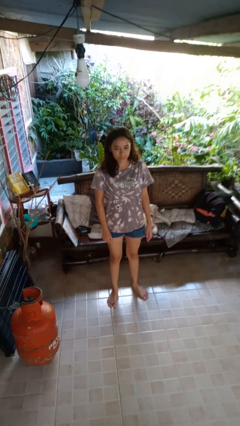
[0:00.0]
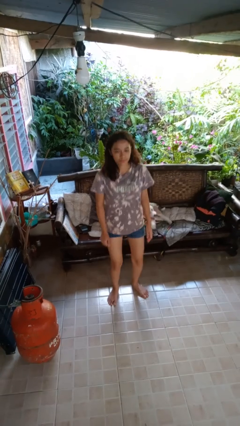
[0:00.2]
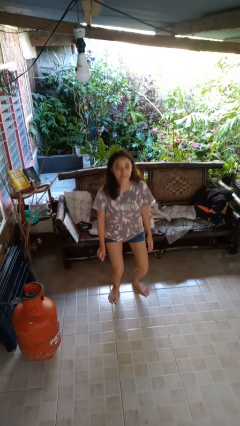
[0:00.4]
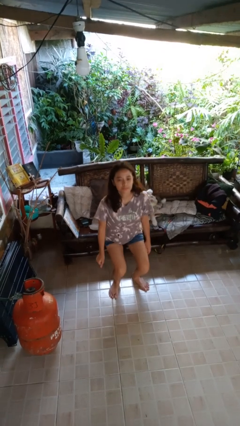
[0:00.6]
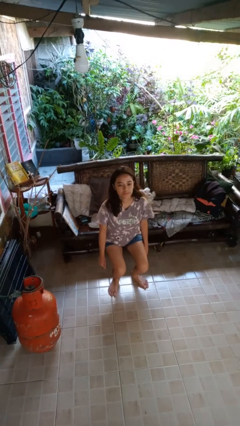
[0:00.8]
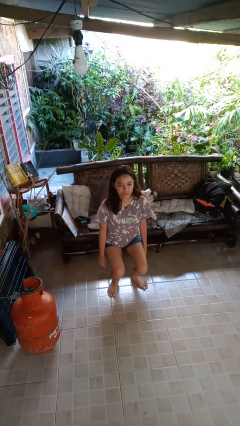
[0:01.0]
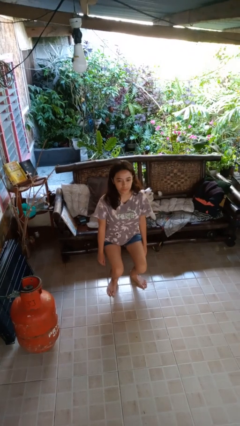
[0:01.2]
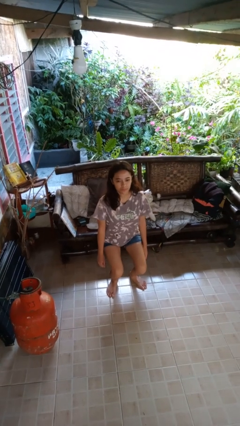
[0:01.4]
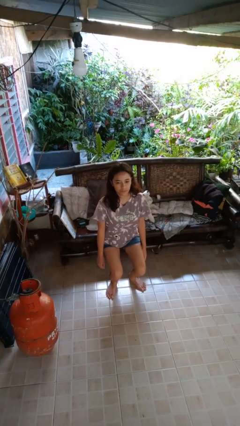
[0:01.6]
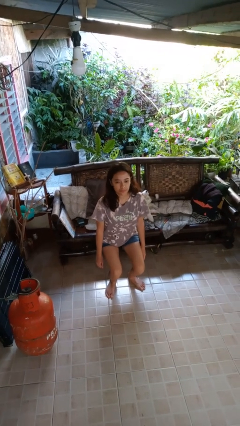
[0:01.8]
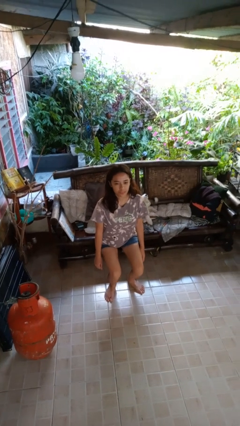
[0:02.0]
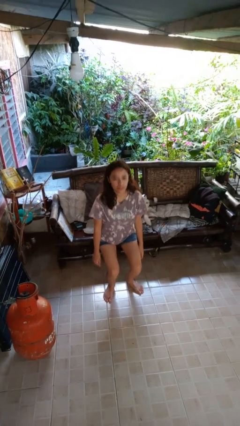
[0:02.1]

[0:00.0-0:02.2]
person squats

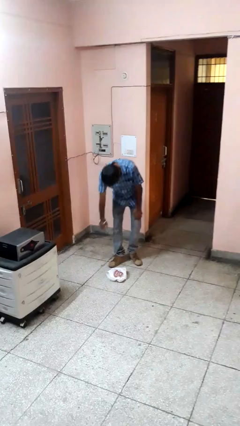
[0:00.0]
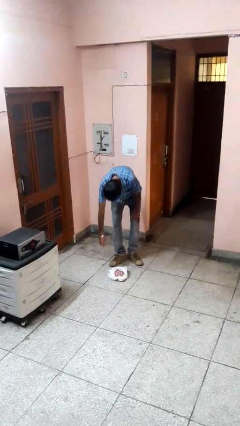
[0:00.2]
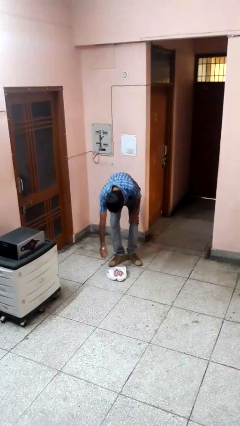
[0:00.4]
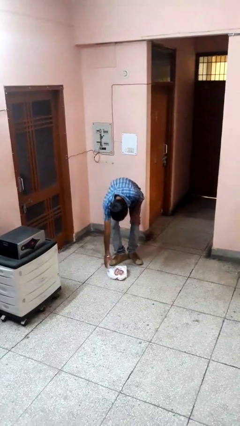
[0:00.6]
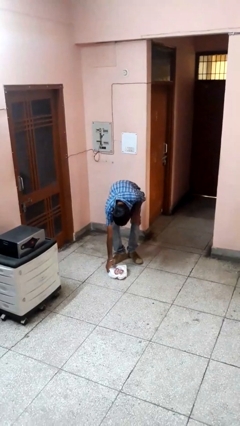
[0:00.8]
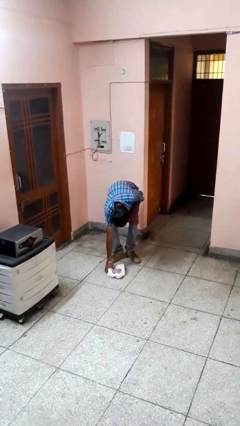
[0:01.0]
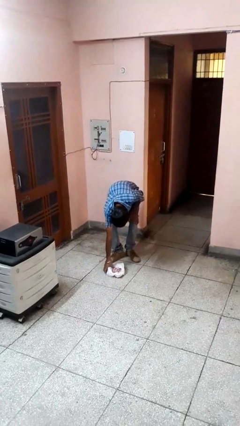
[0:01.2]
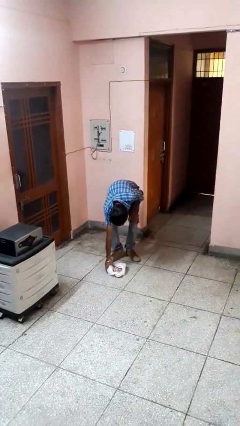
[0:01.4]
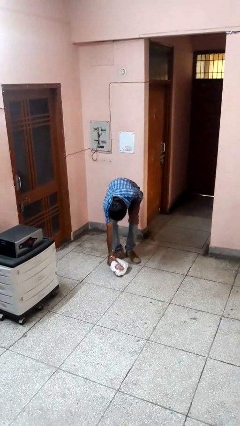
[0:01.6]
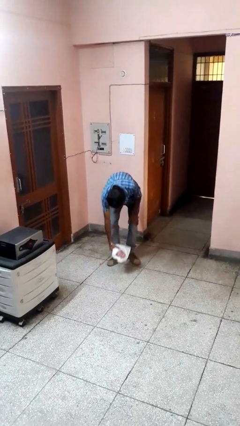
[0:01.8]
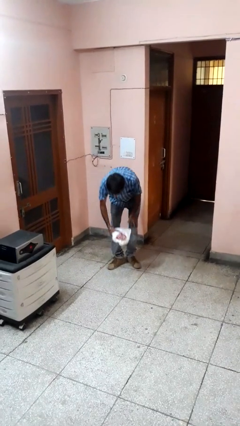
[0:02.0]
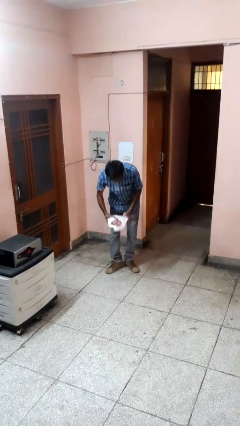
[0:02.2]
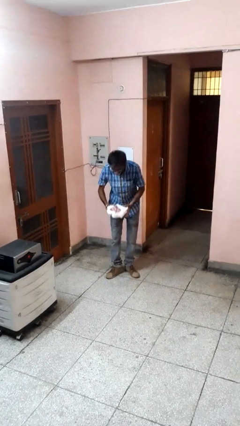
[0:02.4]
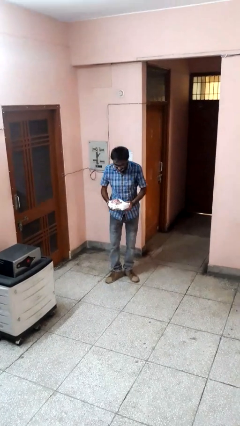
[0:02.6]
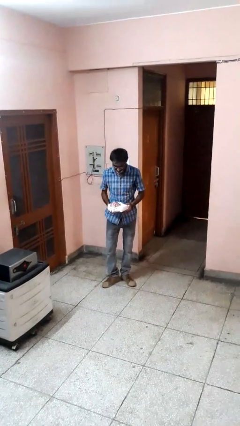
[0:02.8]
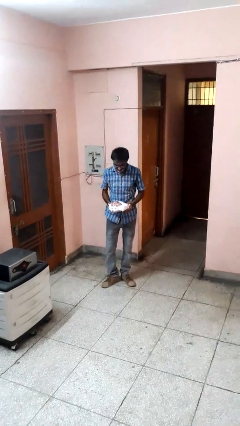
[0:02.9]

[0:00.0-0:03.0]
person picks up object from floor

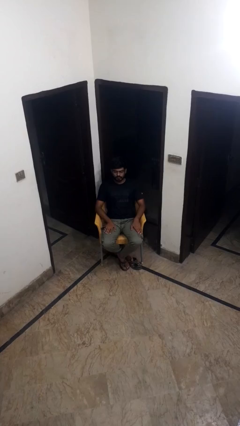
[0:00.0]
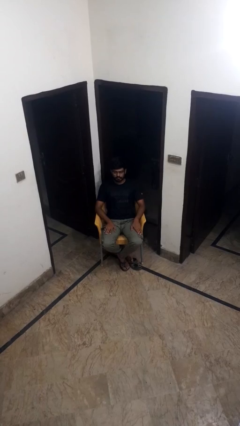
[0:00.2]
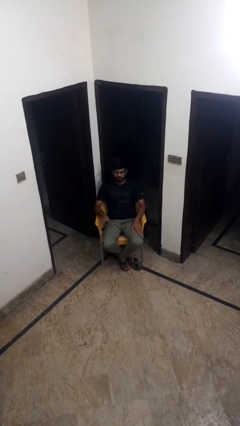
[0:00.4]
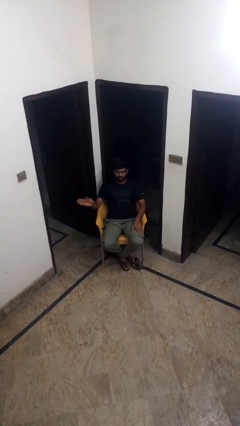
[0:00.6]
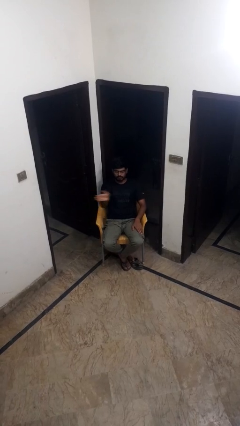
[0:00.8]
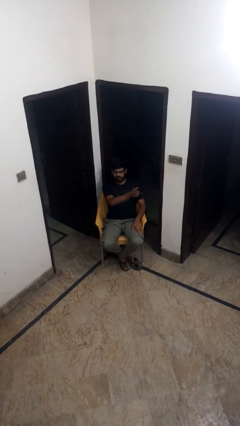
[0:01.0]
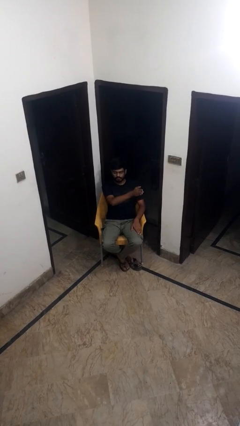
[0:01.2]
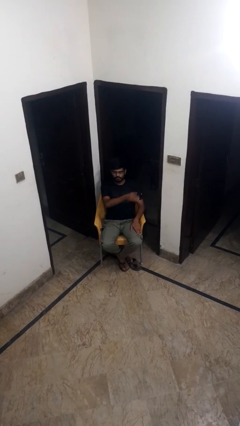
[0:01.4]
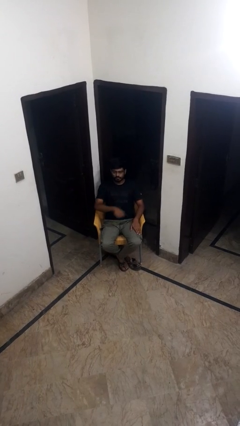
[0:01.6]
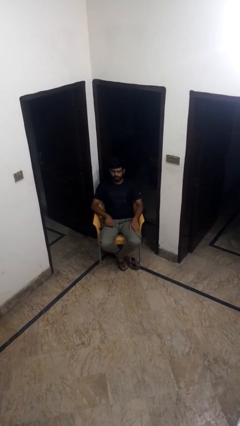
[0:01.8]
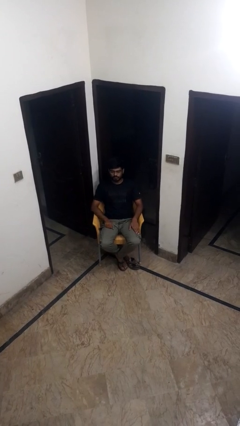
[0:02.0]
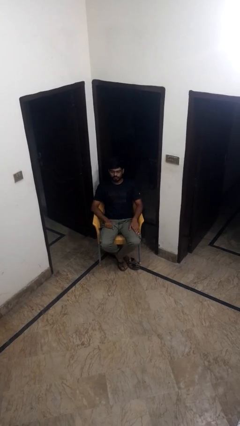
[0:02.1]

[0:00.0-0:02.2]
person gestures swipe left

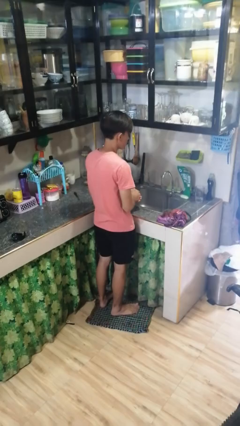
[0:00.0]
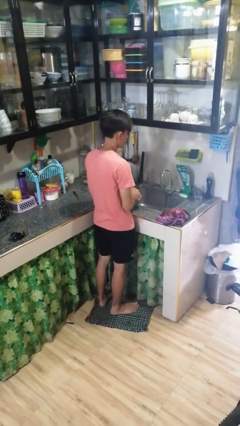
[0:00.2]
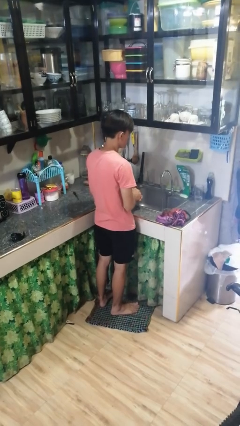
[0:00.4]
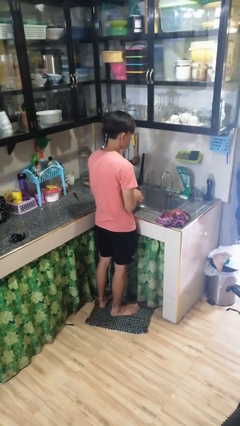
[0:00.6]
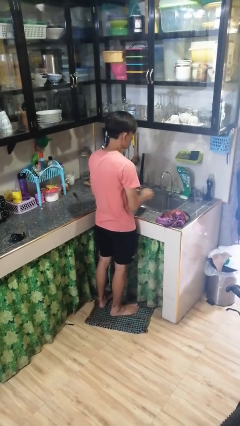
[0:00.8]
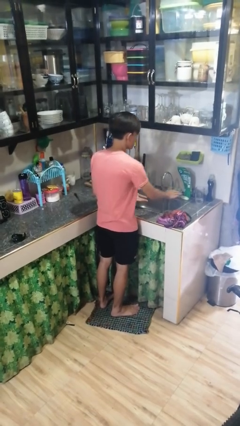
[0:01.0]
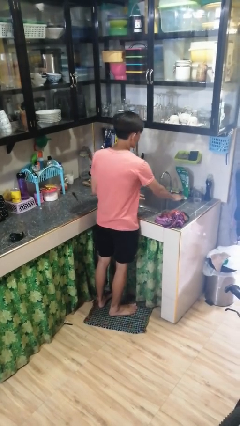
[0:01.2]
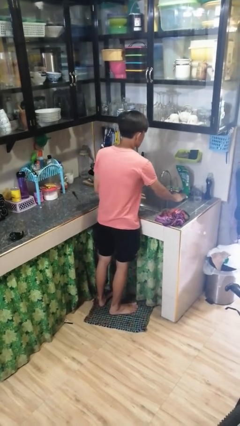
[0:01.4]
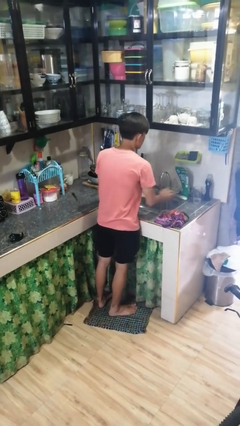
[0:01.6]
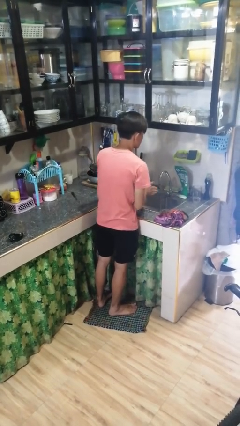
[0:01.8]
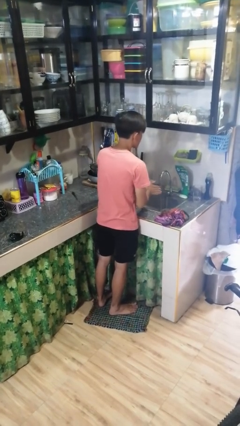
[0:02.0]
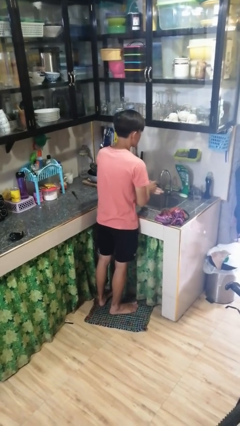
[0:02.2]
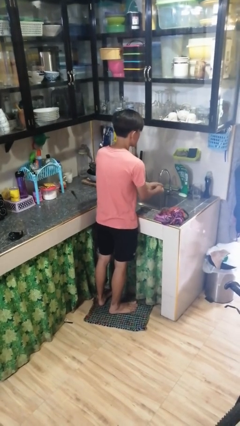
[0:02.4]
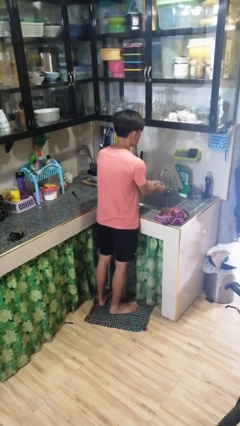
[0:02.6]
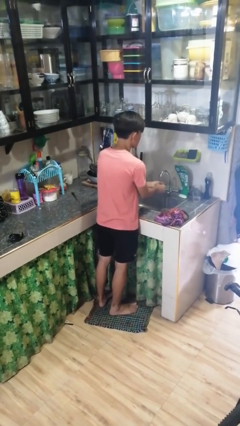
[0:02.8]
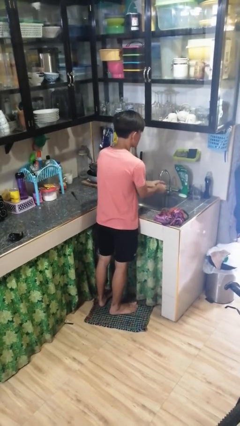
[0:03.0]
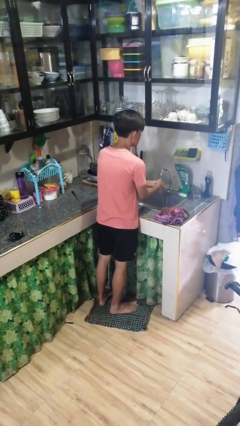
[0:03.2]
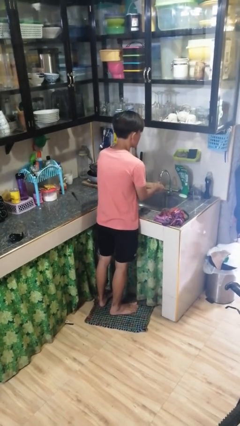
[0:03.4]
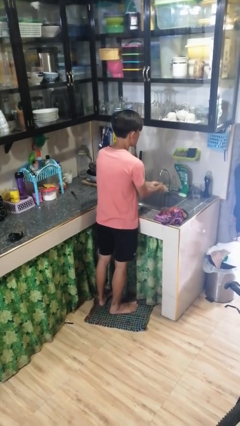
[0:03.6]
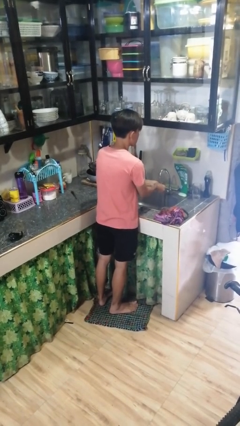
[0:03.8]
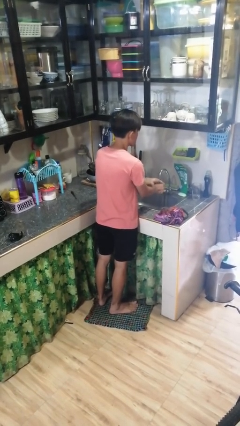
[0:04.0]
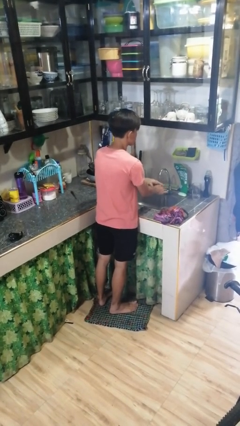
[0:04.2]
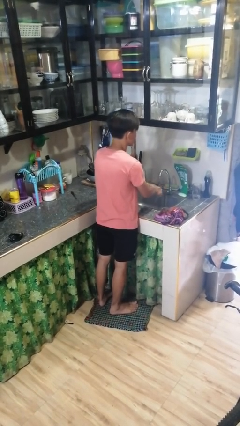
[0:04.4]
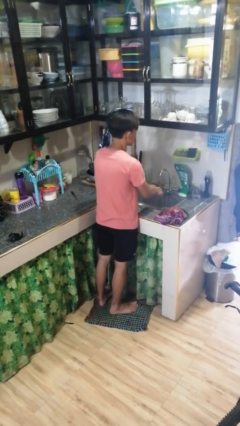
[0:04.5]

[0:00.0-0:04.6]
person washes hands

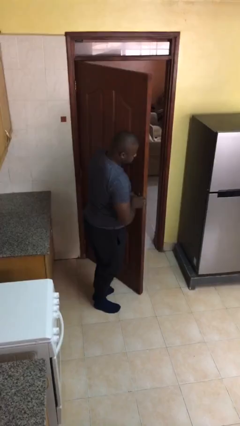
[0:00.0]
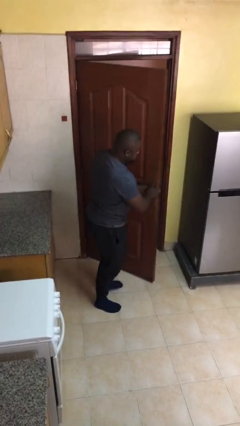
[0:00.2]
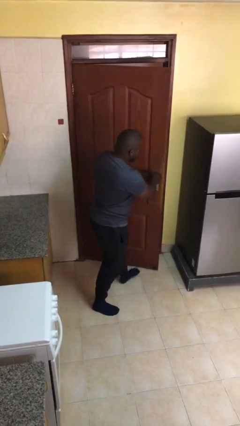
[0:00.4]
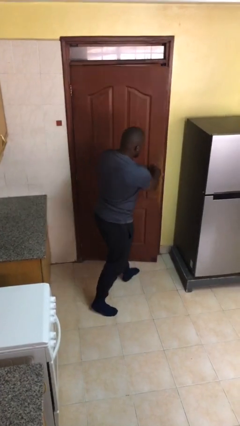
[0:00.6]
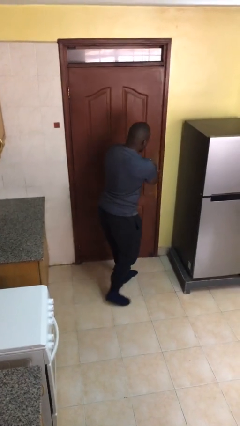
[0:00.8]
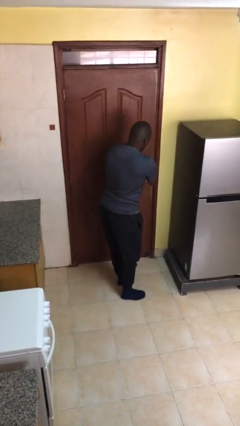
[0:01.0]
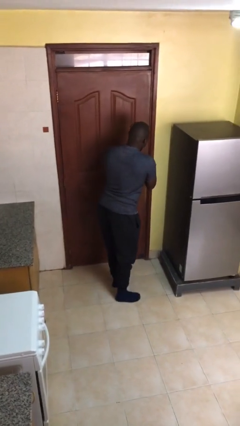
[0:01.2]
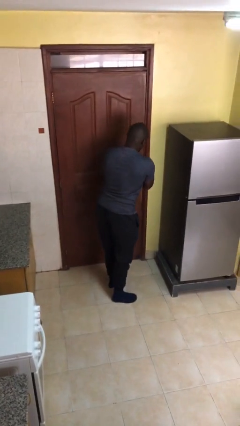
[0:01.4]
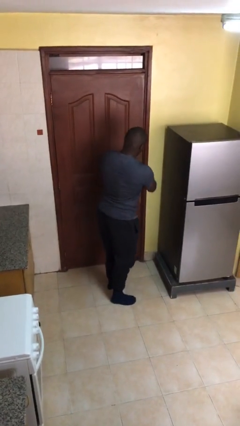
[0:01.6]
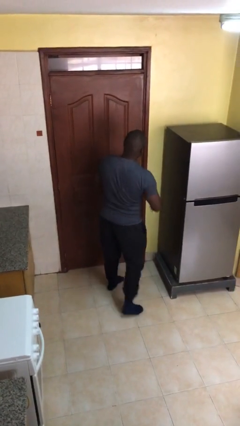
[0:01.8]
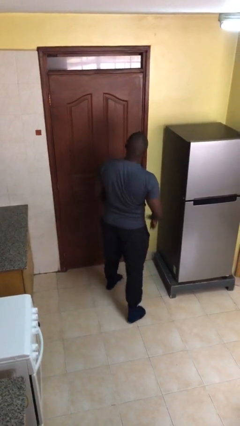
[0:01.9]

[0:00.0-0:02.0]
person closes facility door

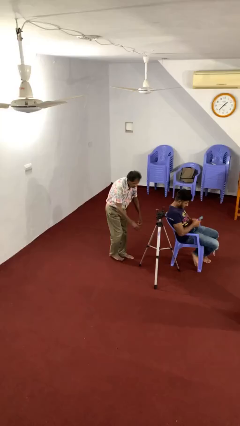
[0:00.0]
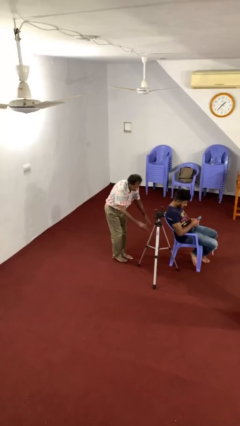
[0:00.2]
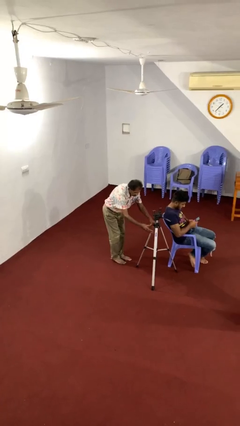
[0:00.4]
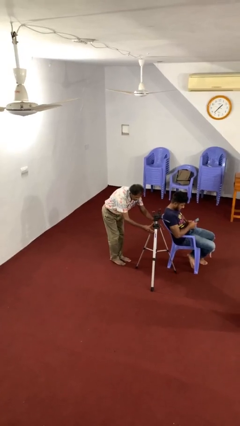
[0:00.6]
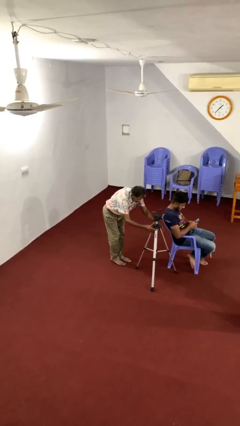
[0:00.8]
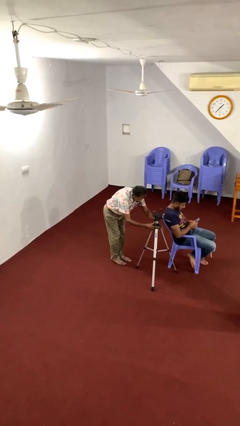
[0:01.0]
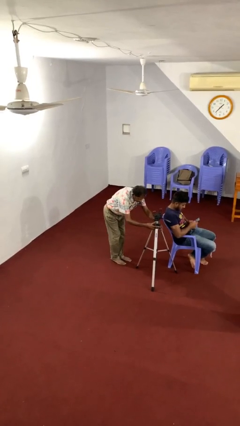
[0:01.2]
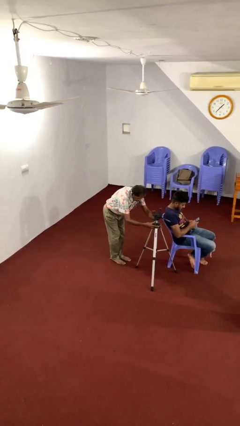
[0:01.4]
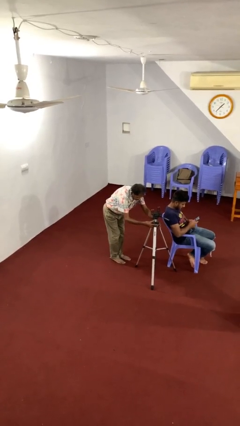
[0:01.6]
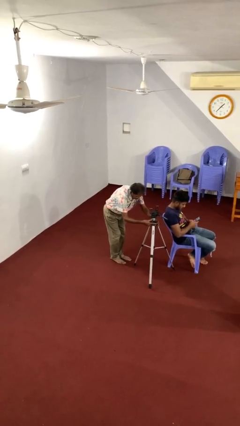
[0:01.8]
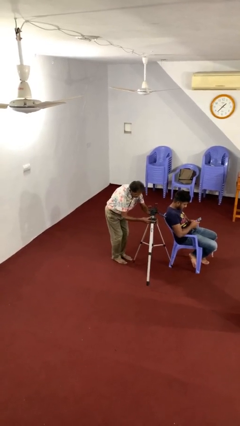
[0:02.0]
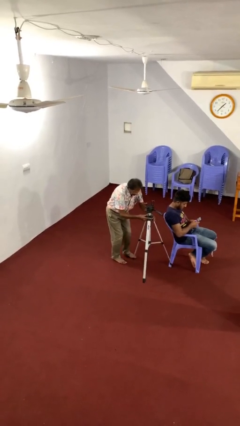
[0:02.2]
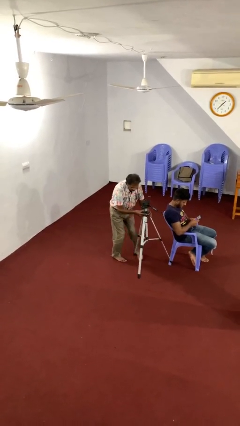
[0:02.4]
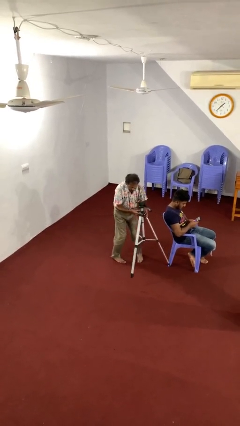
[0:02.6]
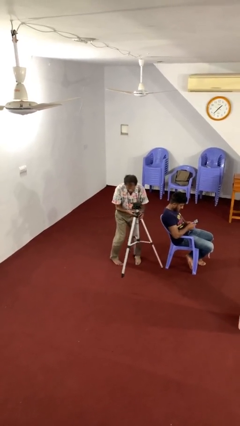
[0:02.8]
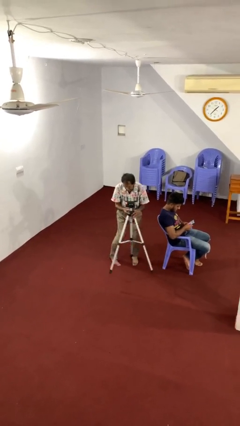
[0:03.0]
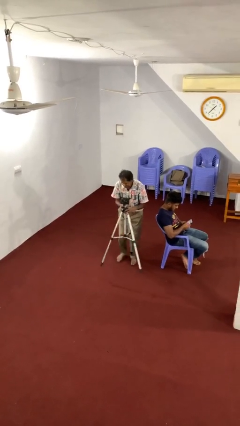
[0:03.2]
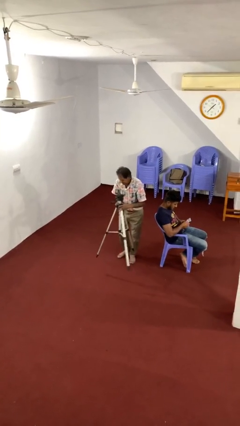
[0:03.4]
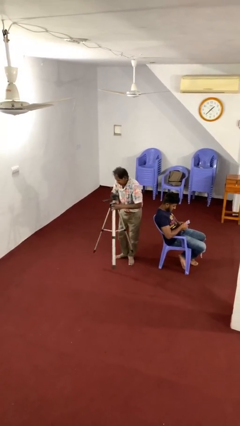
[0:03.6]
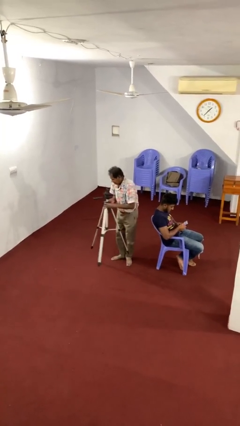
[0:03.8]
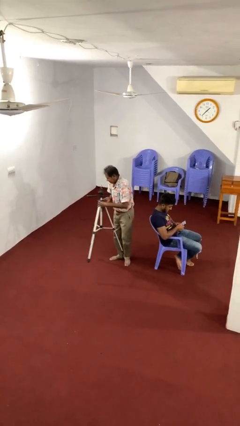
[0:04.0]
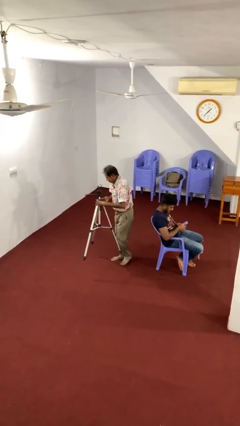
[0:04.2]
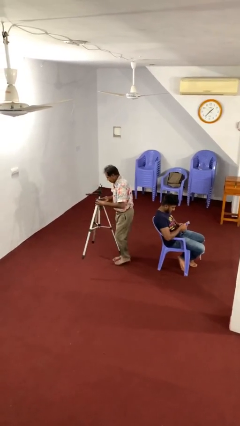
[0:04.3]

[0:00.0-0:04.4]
person steals object from person
